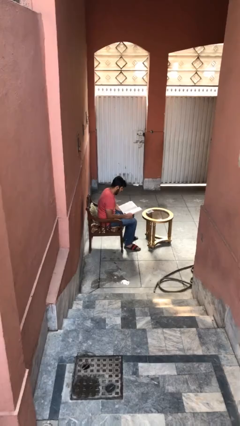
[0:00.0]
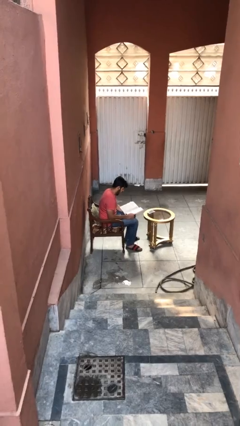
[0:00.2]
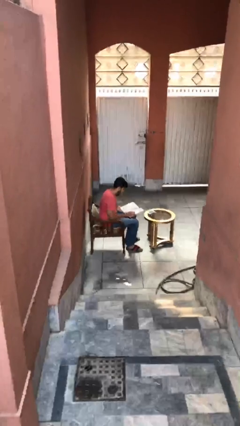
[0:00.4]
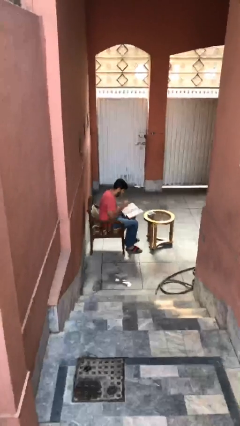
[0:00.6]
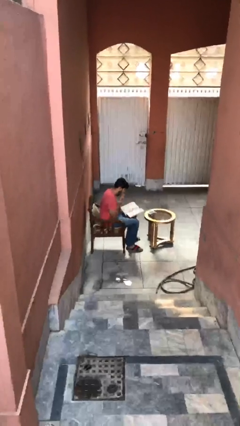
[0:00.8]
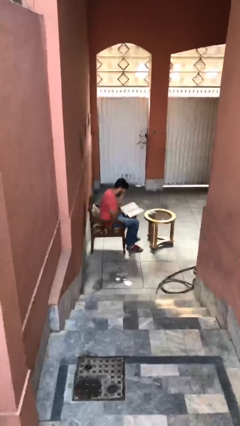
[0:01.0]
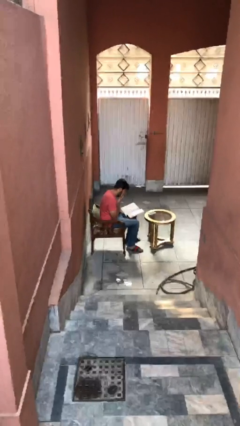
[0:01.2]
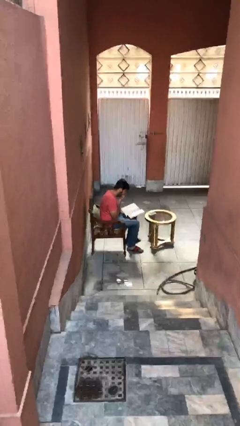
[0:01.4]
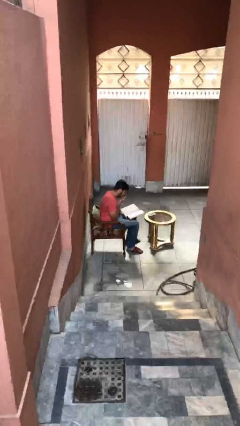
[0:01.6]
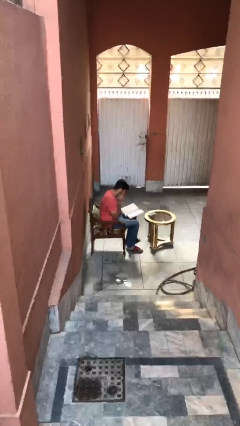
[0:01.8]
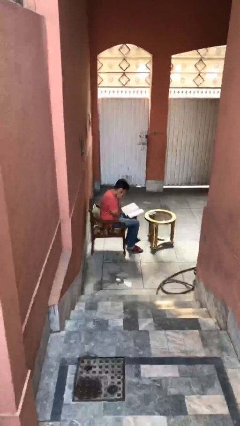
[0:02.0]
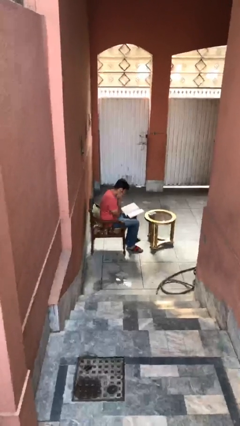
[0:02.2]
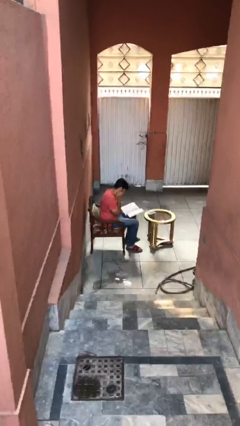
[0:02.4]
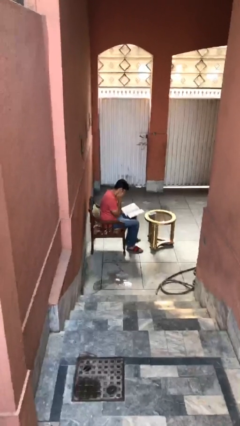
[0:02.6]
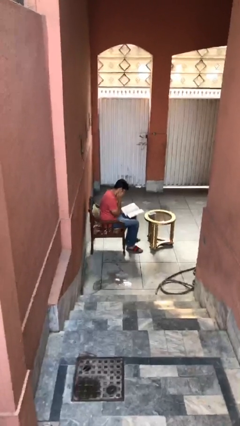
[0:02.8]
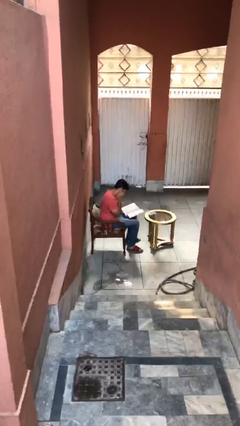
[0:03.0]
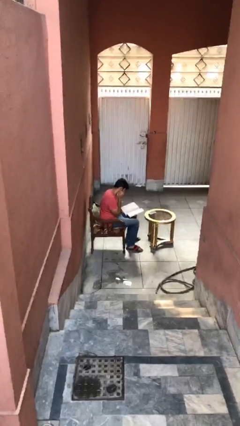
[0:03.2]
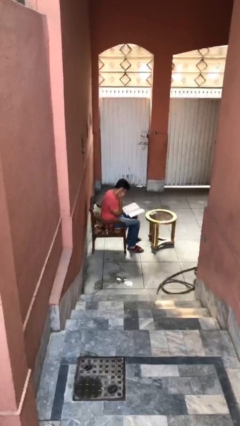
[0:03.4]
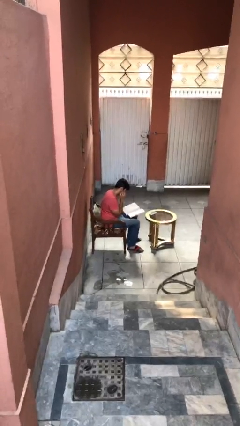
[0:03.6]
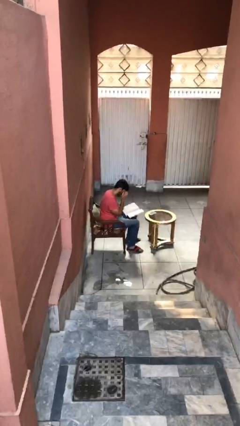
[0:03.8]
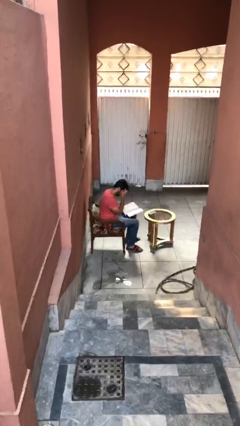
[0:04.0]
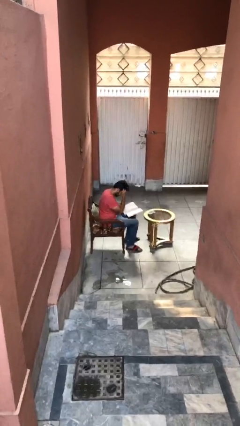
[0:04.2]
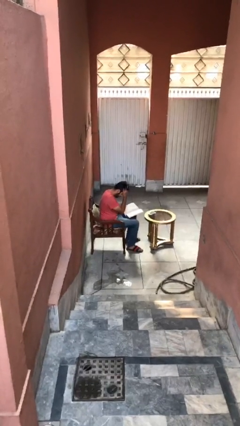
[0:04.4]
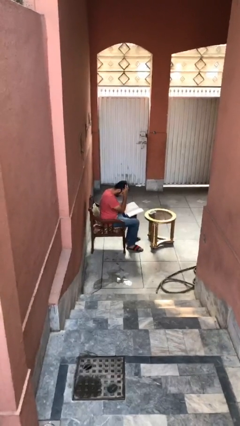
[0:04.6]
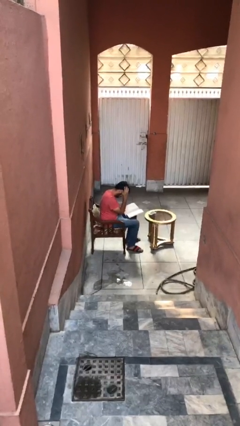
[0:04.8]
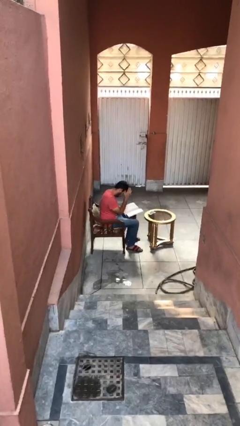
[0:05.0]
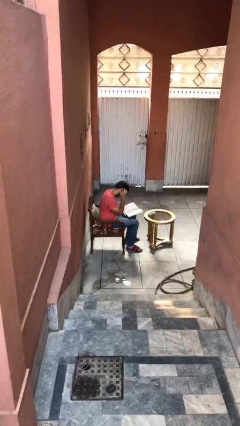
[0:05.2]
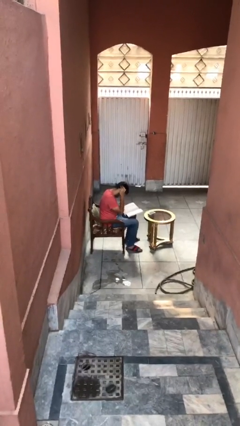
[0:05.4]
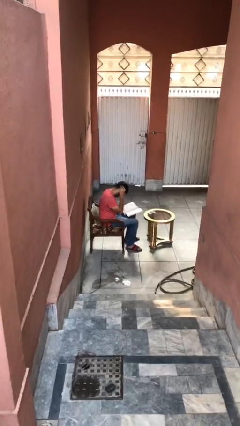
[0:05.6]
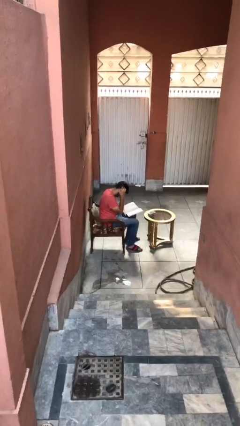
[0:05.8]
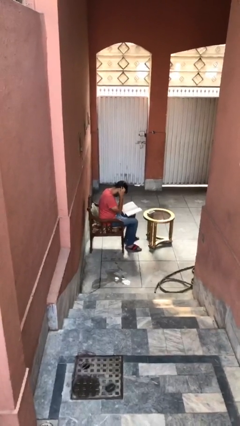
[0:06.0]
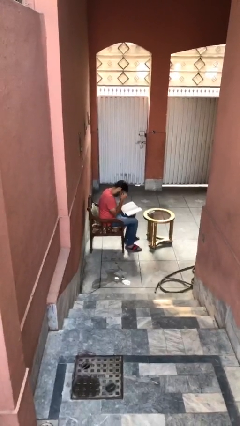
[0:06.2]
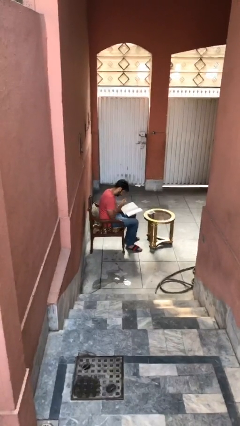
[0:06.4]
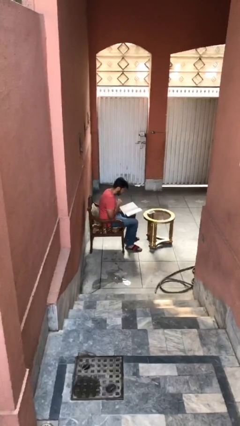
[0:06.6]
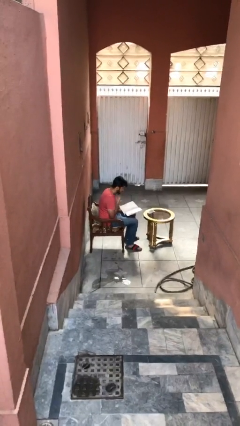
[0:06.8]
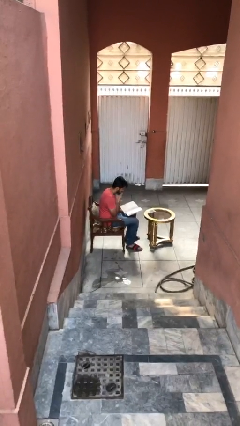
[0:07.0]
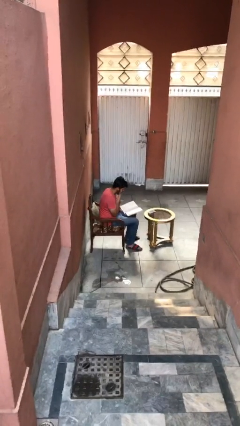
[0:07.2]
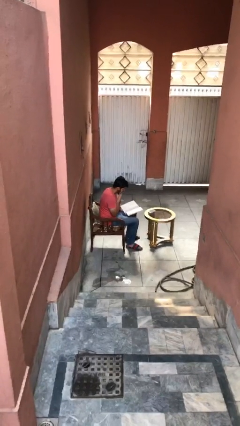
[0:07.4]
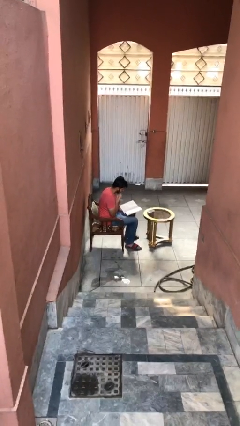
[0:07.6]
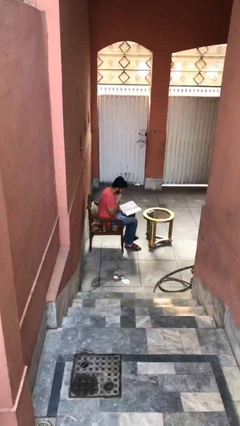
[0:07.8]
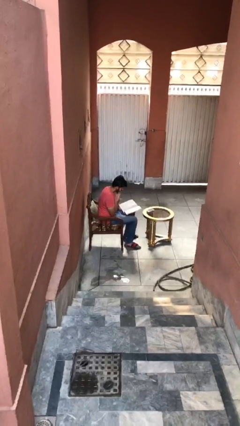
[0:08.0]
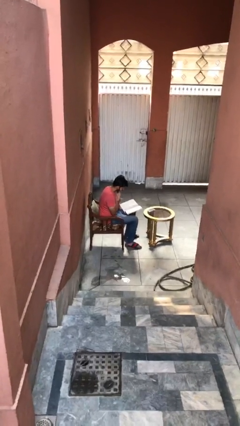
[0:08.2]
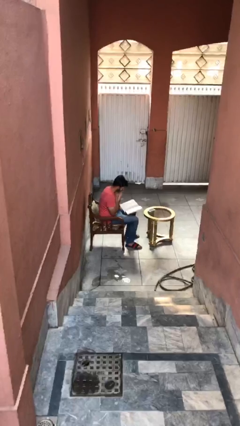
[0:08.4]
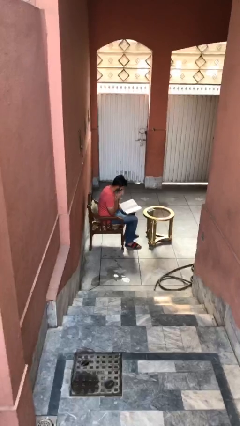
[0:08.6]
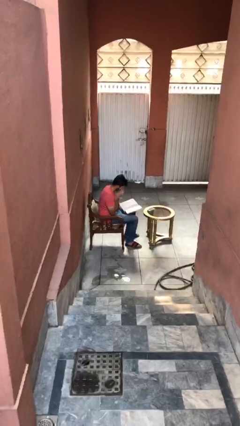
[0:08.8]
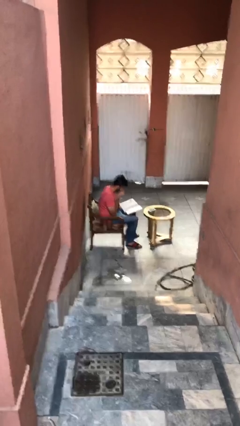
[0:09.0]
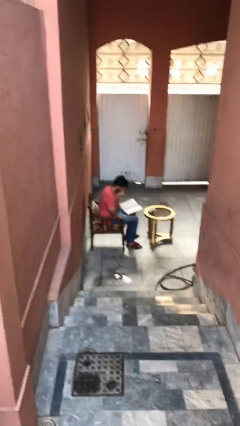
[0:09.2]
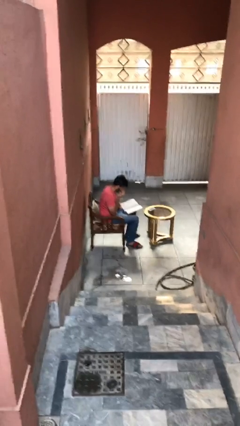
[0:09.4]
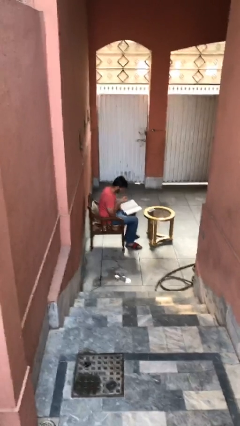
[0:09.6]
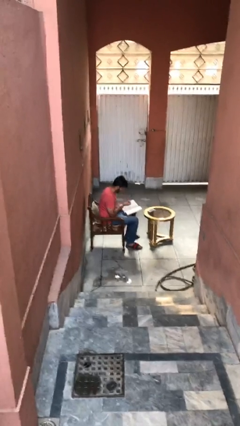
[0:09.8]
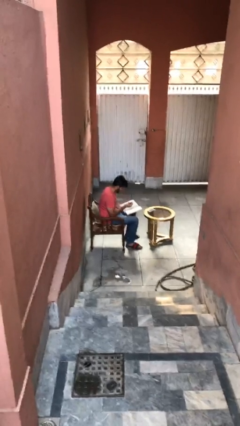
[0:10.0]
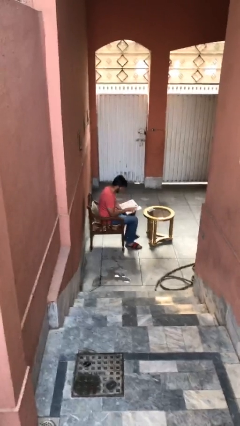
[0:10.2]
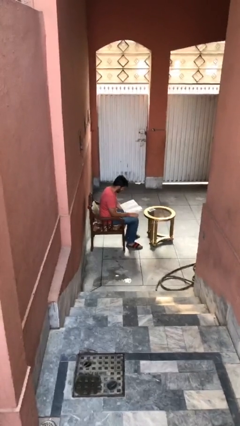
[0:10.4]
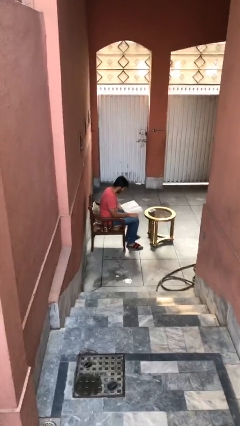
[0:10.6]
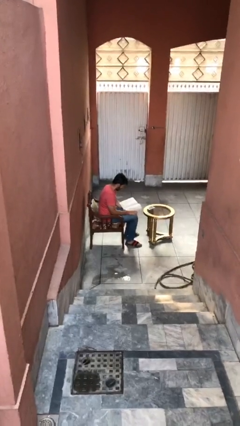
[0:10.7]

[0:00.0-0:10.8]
person reads document

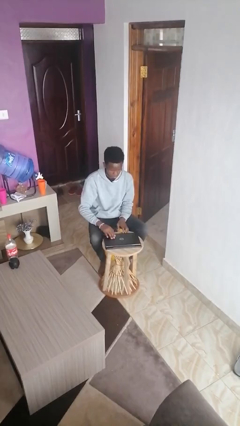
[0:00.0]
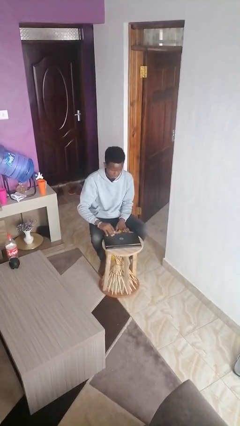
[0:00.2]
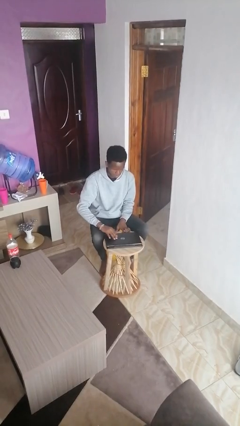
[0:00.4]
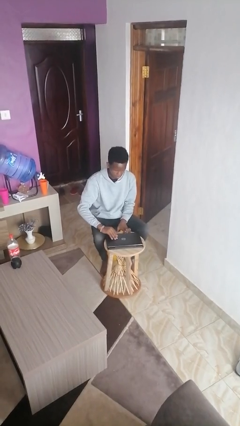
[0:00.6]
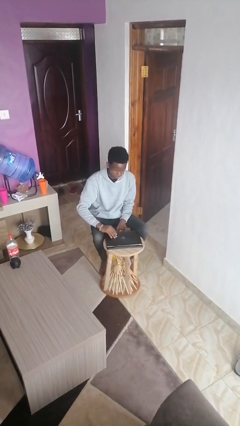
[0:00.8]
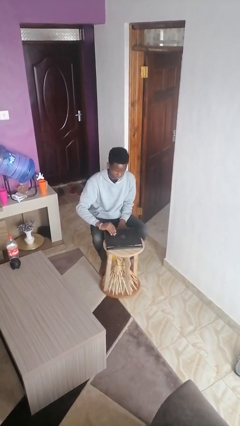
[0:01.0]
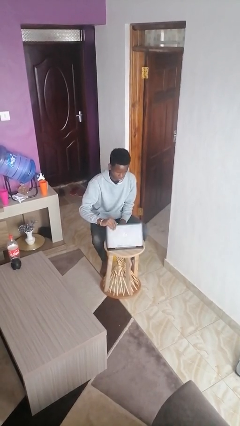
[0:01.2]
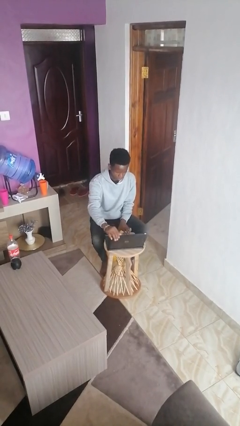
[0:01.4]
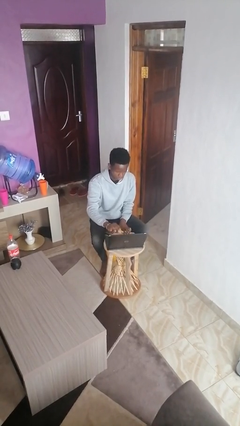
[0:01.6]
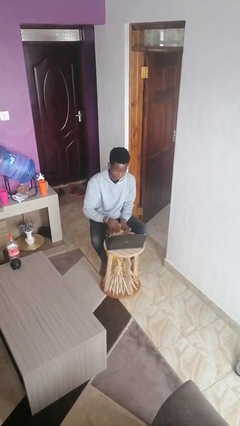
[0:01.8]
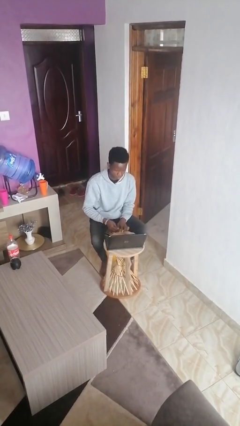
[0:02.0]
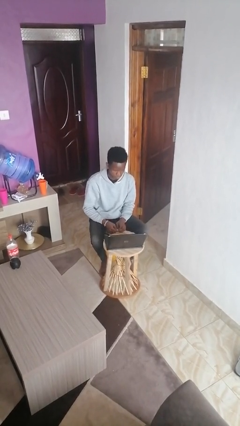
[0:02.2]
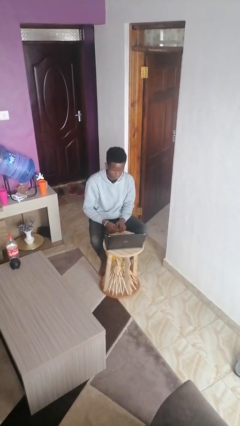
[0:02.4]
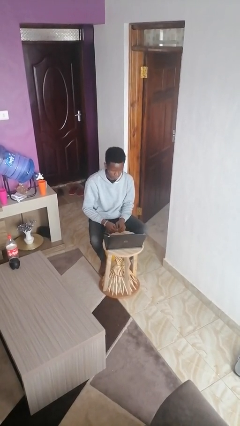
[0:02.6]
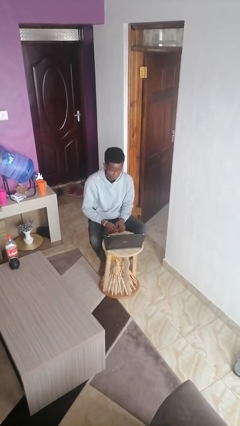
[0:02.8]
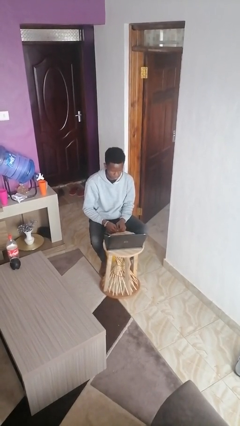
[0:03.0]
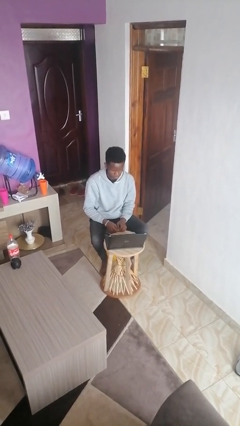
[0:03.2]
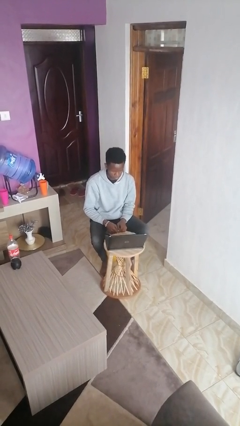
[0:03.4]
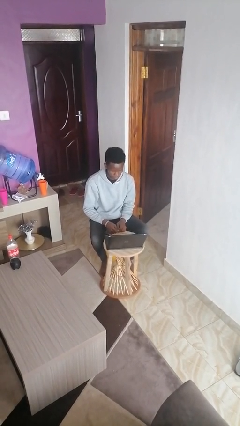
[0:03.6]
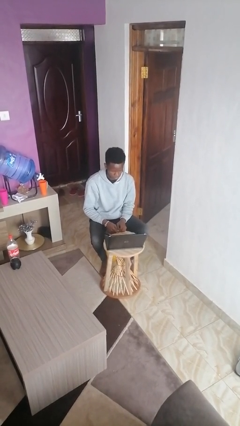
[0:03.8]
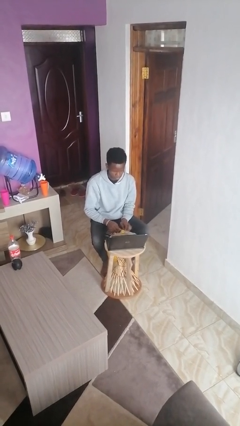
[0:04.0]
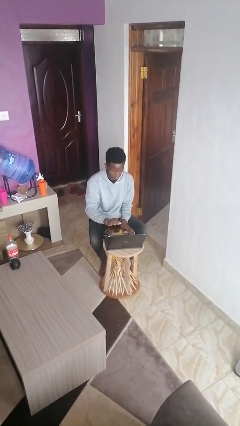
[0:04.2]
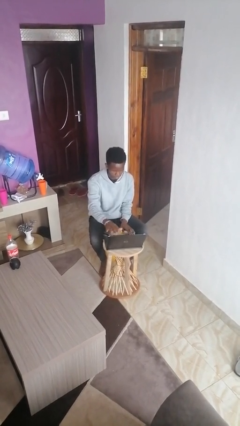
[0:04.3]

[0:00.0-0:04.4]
person opens laptop

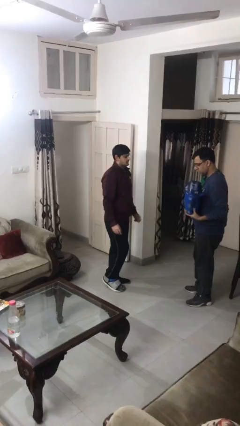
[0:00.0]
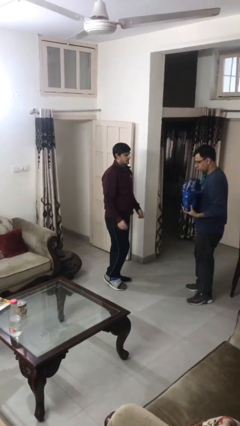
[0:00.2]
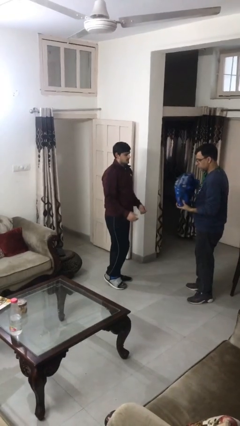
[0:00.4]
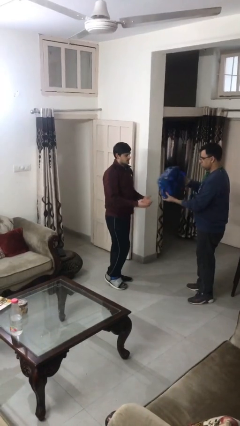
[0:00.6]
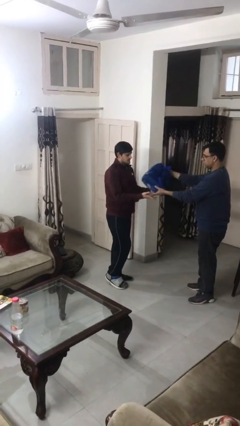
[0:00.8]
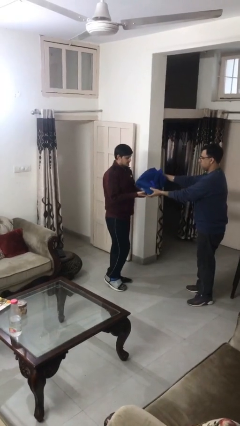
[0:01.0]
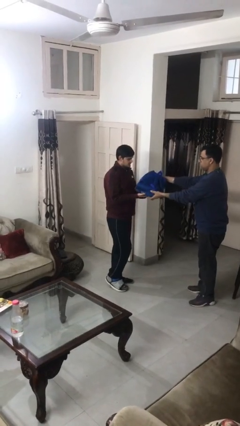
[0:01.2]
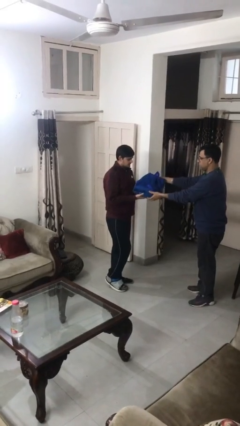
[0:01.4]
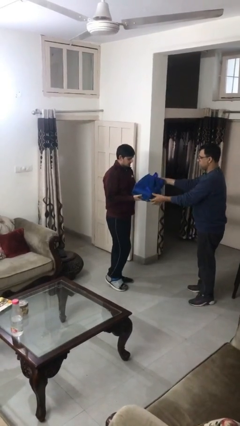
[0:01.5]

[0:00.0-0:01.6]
person transfers object to person

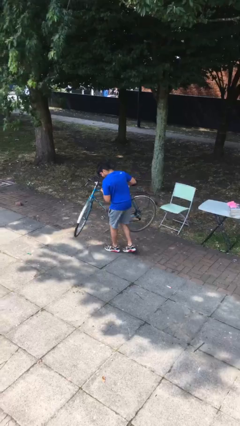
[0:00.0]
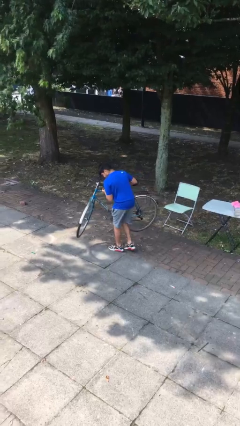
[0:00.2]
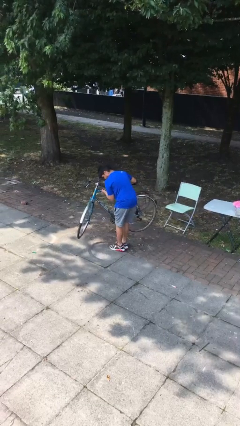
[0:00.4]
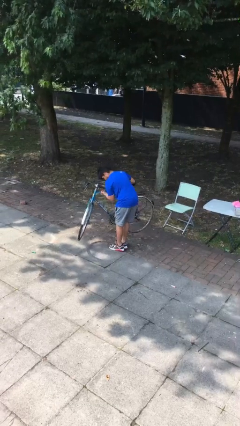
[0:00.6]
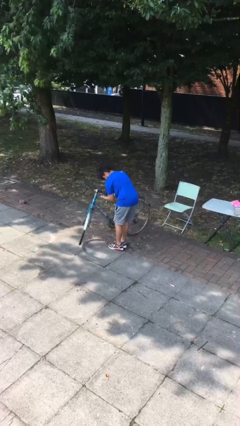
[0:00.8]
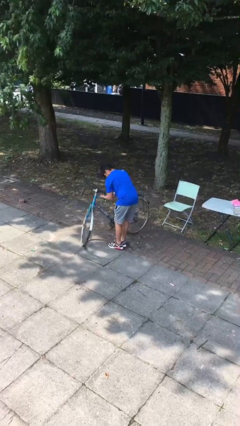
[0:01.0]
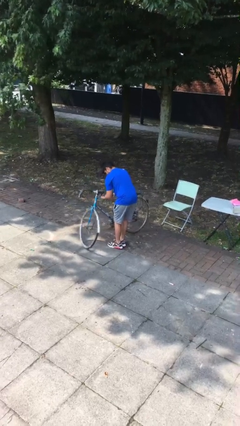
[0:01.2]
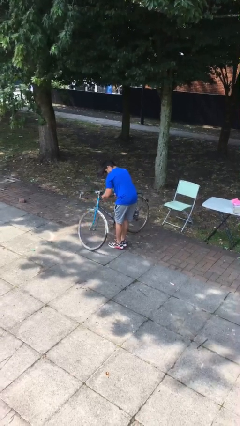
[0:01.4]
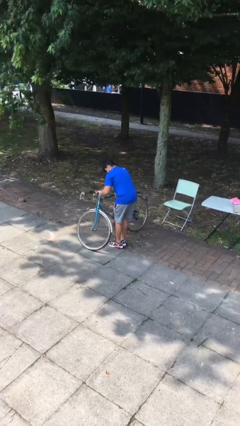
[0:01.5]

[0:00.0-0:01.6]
person puts down object on floor
